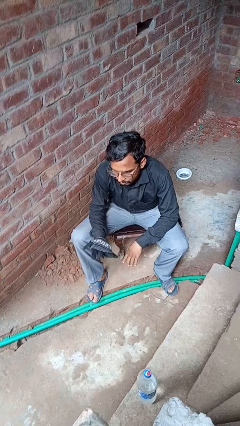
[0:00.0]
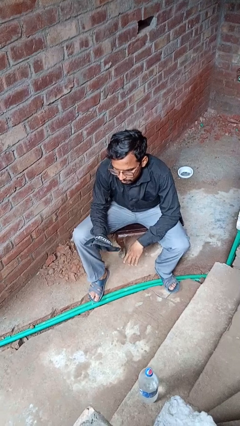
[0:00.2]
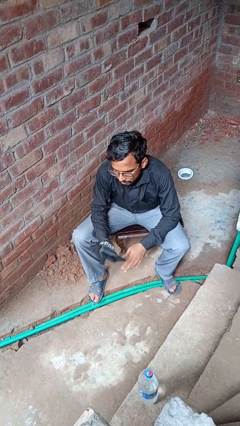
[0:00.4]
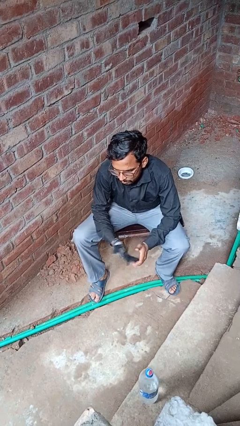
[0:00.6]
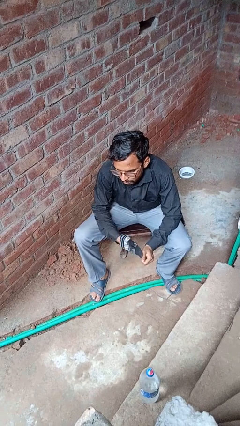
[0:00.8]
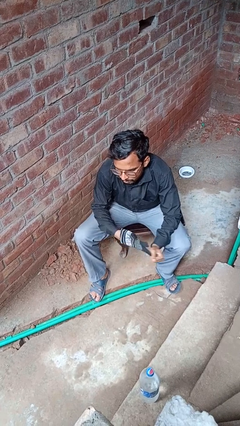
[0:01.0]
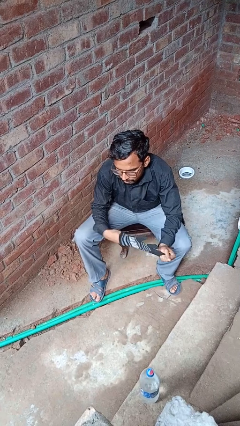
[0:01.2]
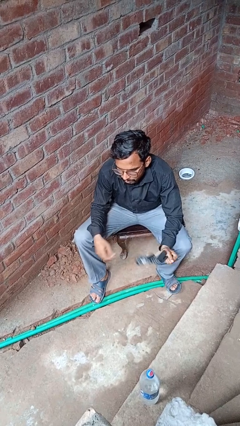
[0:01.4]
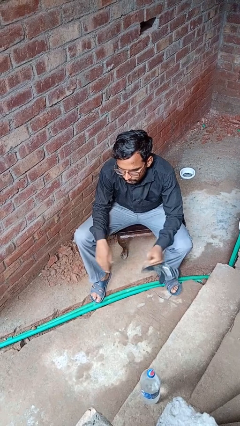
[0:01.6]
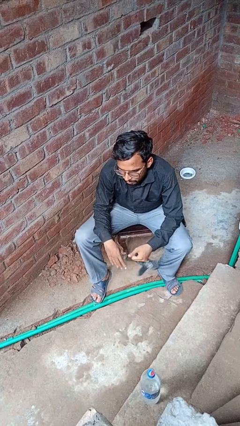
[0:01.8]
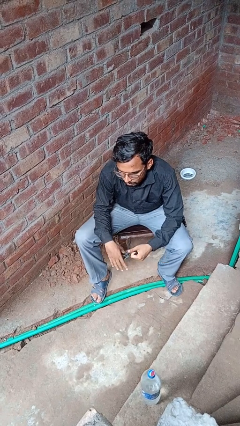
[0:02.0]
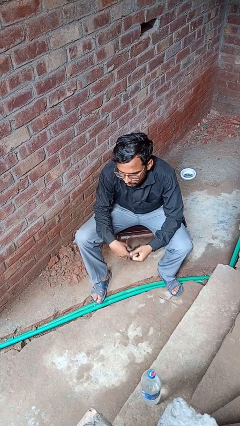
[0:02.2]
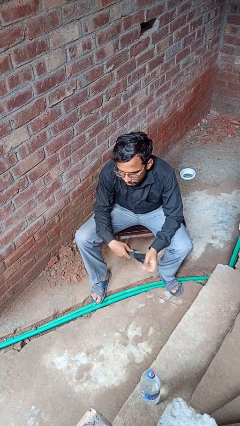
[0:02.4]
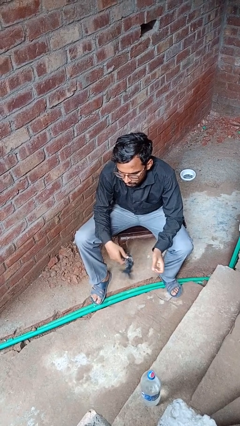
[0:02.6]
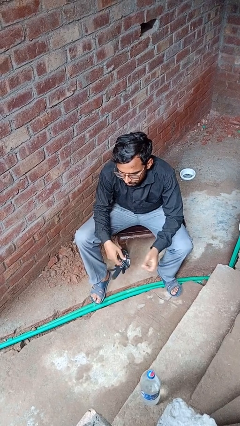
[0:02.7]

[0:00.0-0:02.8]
person takes off gloves

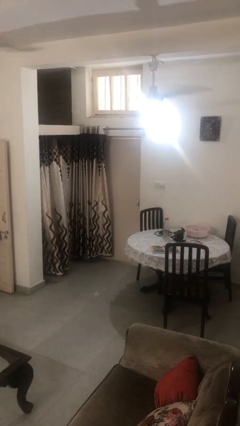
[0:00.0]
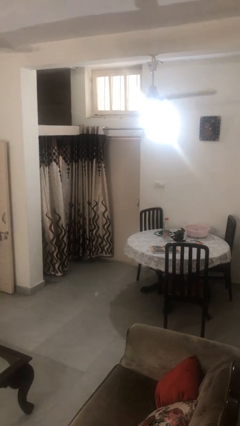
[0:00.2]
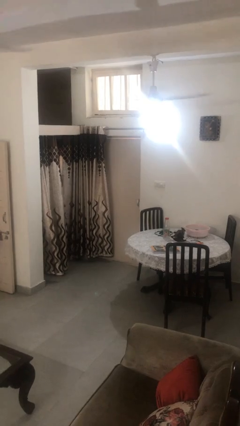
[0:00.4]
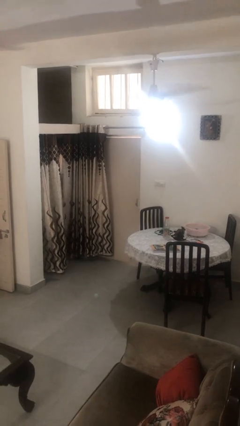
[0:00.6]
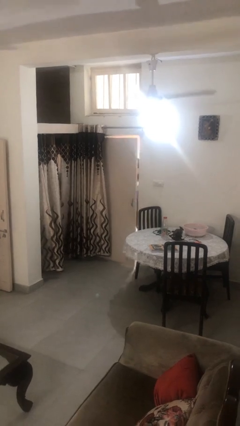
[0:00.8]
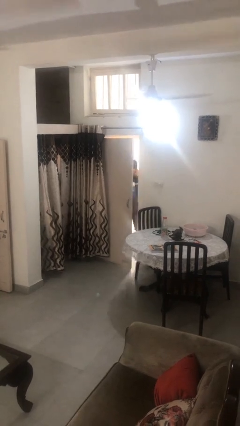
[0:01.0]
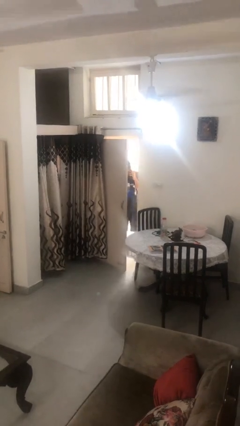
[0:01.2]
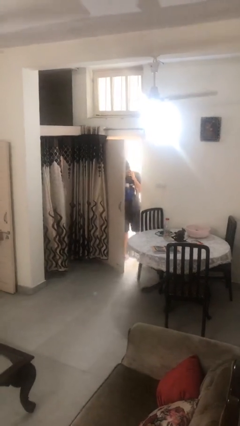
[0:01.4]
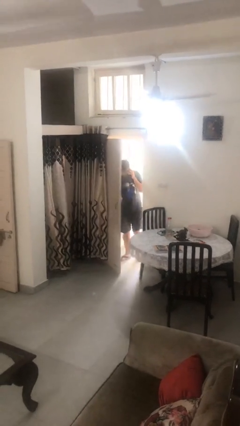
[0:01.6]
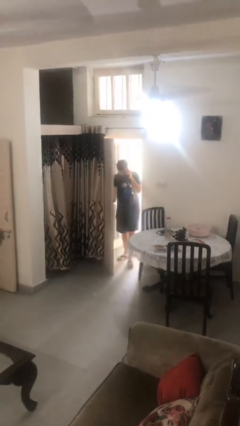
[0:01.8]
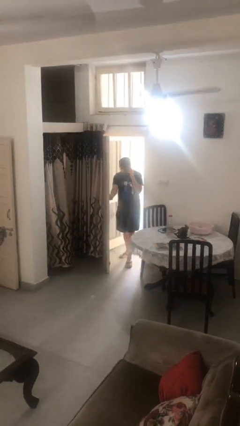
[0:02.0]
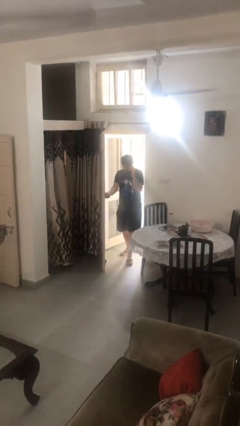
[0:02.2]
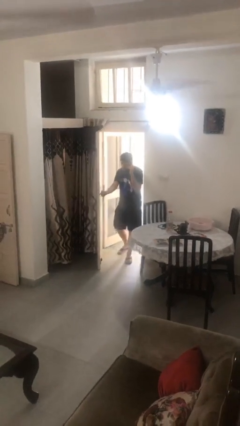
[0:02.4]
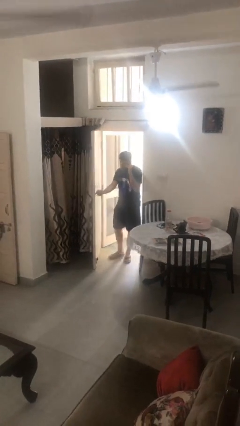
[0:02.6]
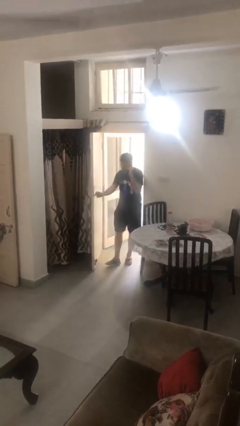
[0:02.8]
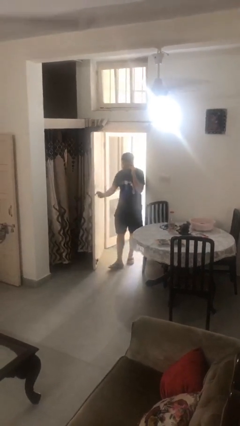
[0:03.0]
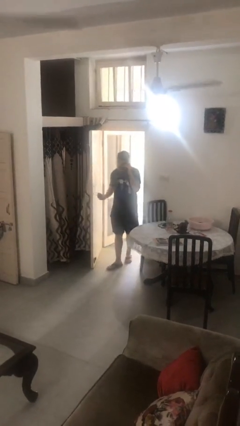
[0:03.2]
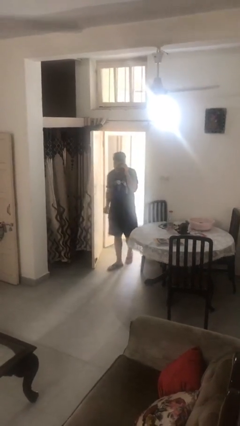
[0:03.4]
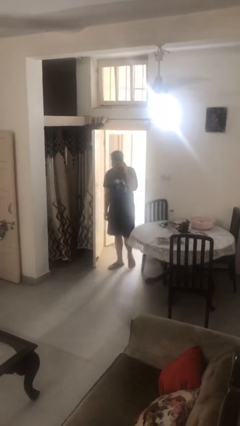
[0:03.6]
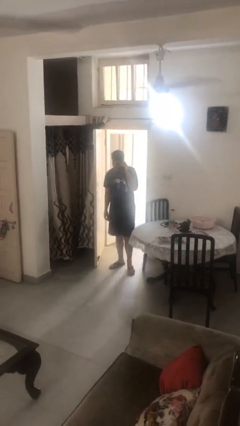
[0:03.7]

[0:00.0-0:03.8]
person opens facility door

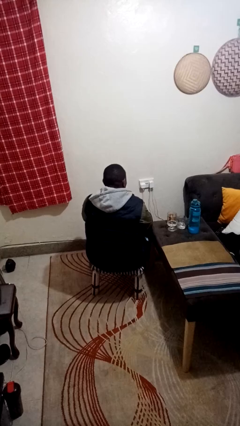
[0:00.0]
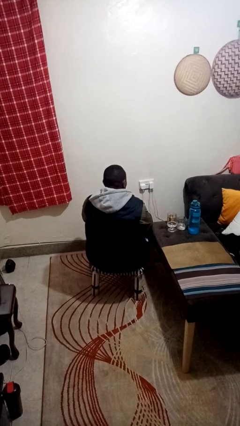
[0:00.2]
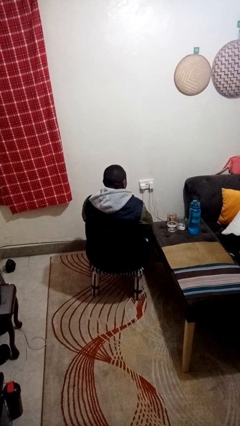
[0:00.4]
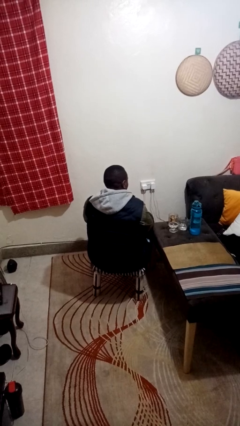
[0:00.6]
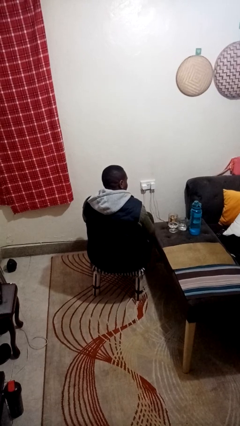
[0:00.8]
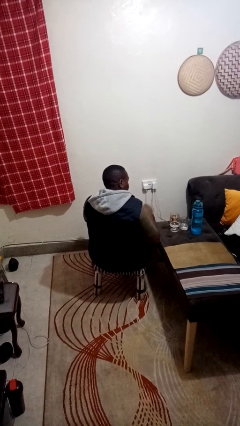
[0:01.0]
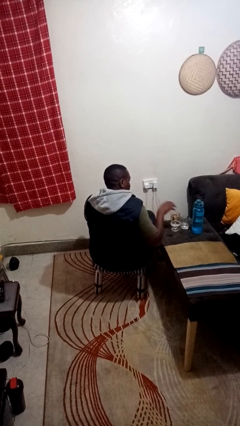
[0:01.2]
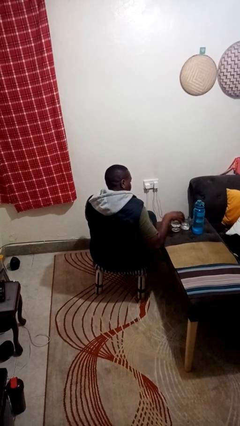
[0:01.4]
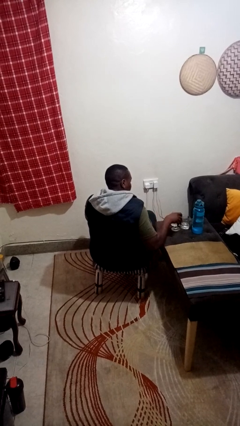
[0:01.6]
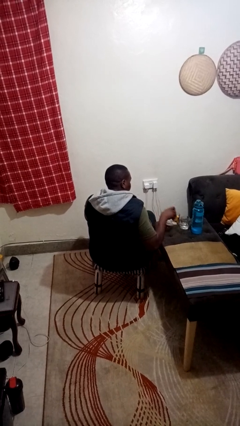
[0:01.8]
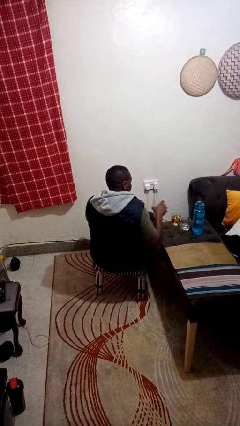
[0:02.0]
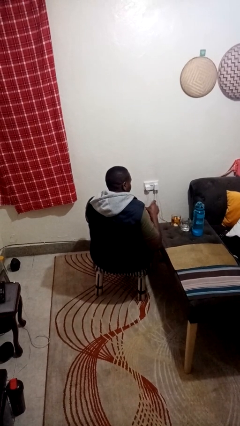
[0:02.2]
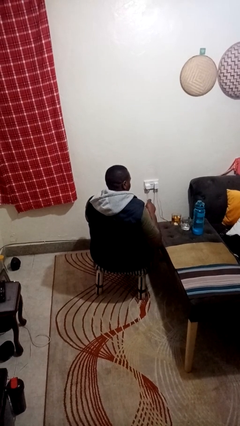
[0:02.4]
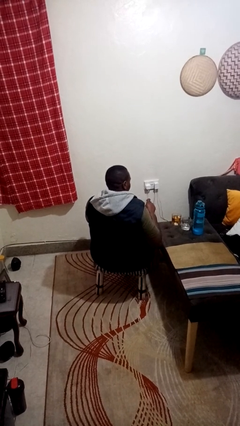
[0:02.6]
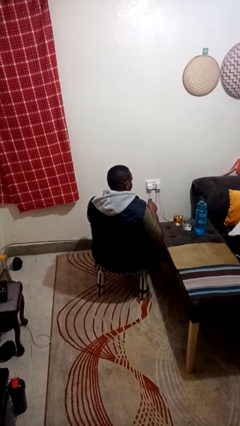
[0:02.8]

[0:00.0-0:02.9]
person picks up object from table

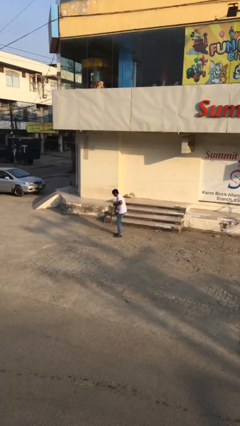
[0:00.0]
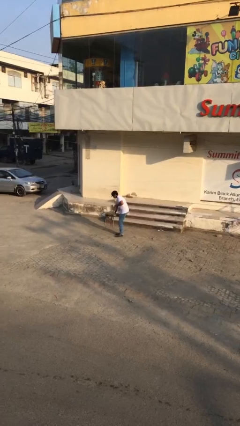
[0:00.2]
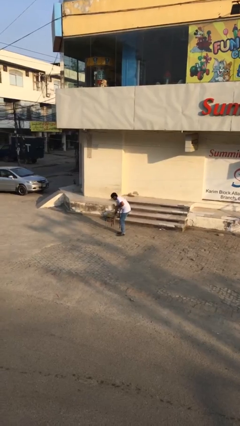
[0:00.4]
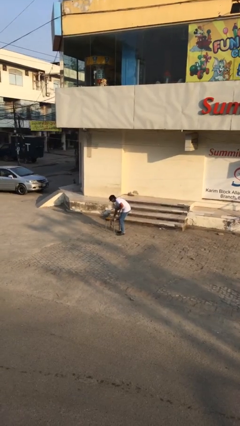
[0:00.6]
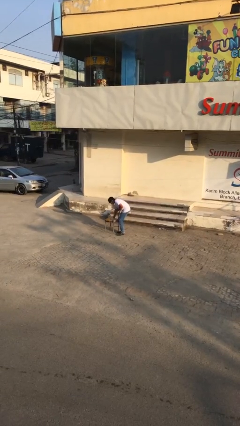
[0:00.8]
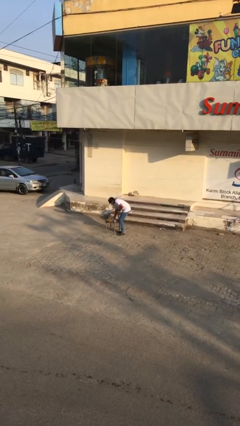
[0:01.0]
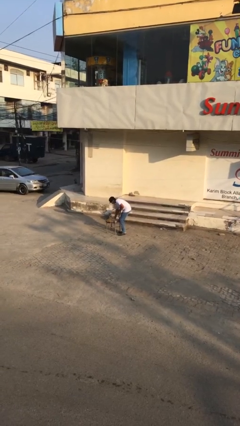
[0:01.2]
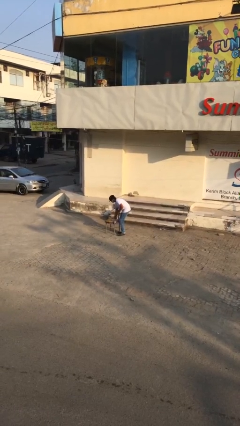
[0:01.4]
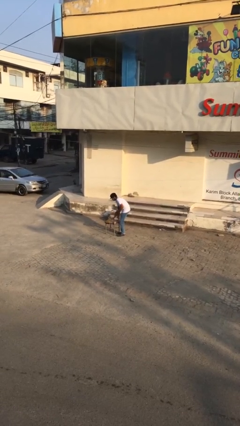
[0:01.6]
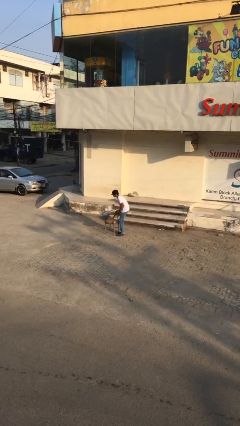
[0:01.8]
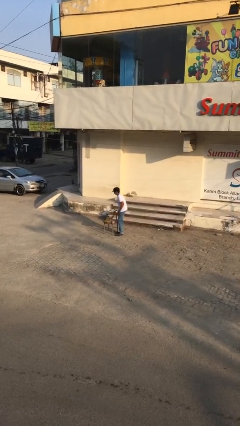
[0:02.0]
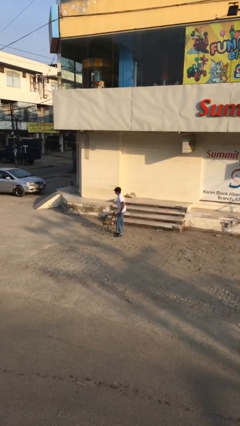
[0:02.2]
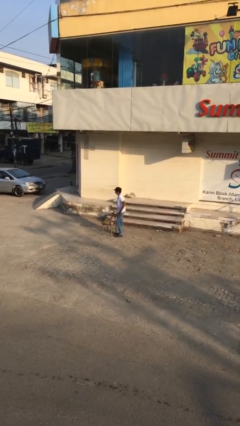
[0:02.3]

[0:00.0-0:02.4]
person puts down object on floor

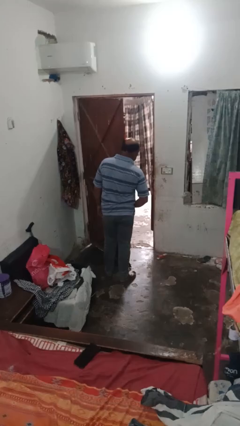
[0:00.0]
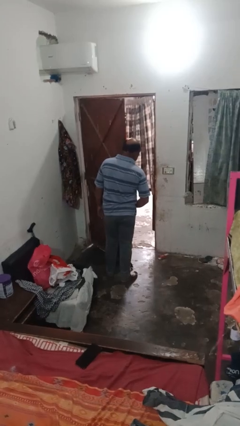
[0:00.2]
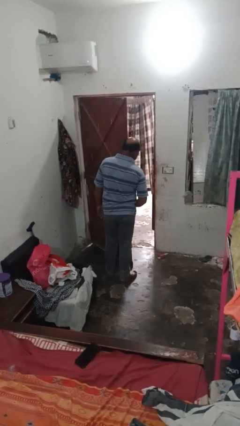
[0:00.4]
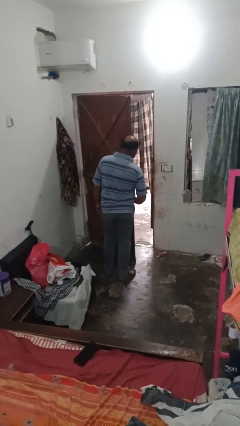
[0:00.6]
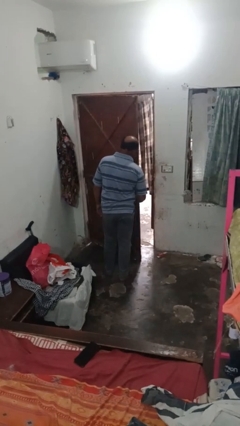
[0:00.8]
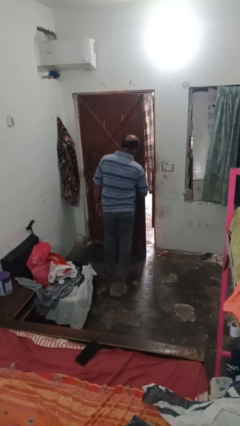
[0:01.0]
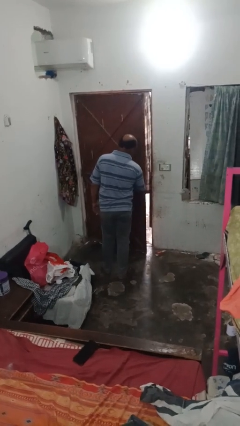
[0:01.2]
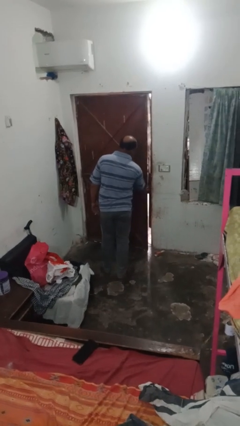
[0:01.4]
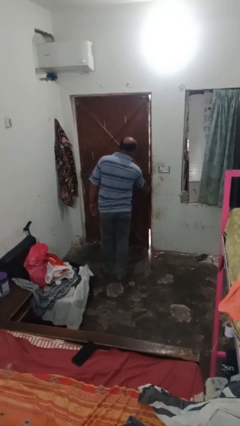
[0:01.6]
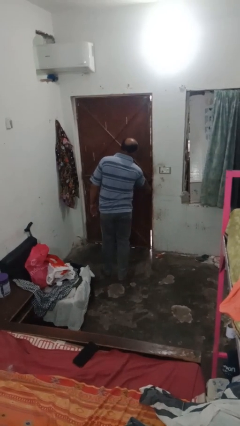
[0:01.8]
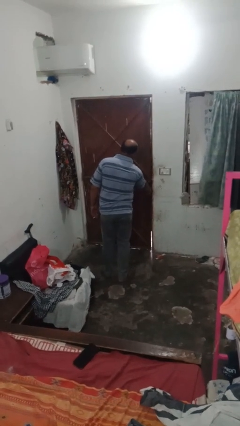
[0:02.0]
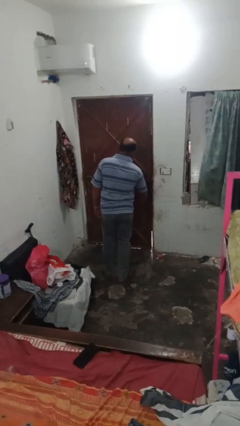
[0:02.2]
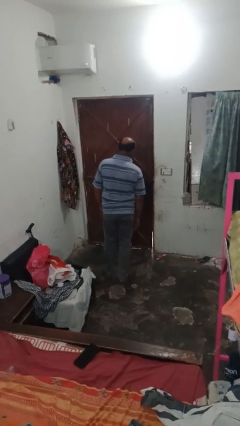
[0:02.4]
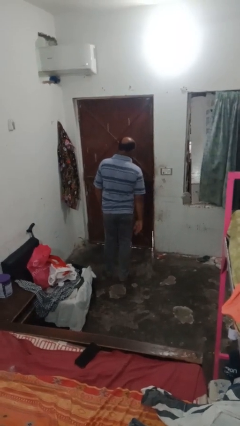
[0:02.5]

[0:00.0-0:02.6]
person closes closet door

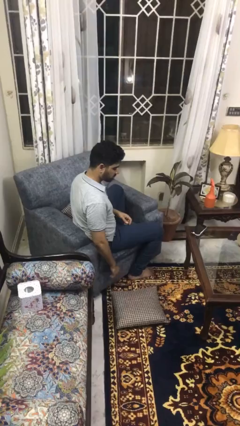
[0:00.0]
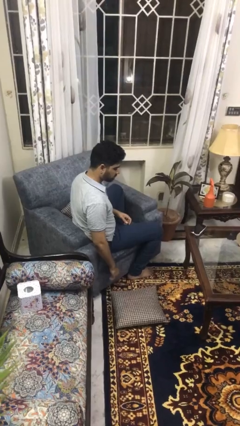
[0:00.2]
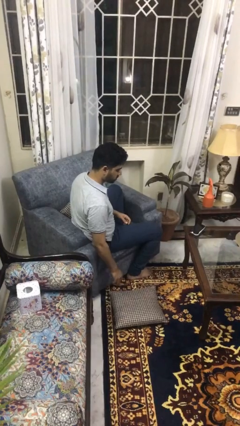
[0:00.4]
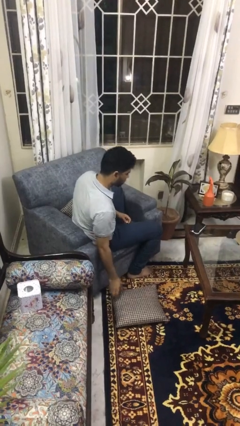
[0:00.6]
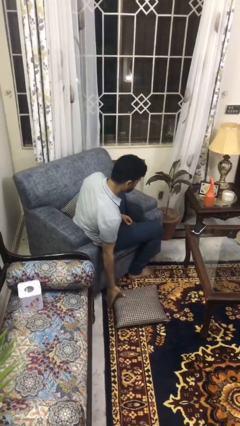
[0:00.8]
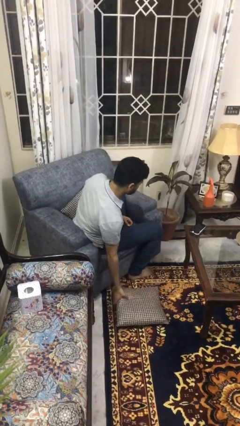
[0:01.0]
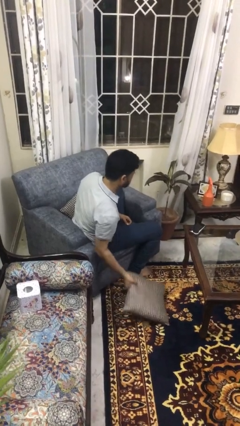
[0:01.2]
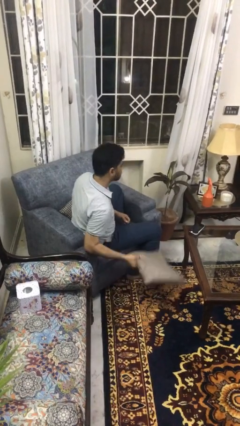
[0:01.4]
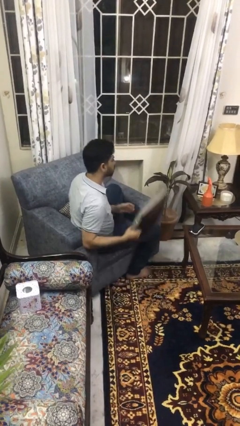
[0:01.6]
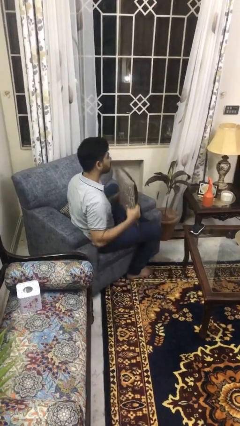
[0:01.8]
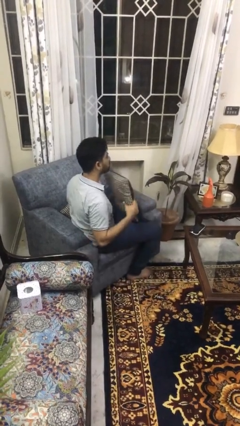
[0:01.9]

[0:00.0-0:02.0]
person picks up object from floor

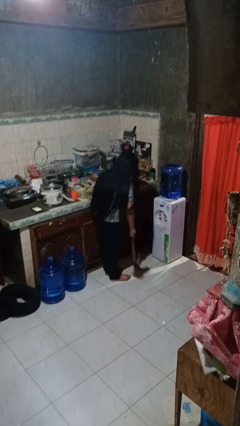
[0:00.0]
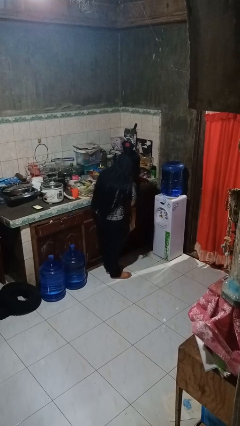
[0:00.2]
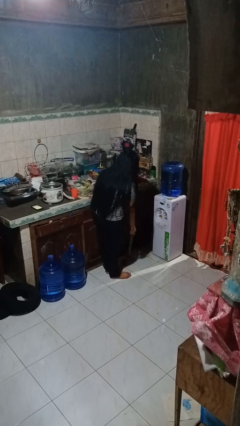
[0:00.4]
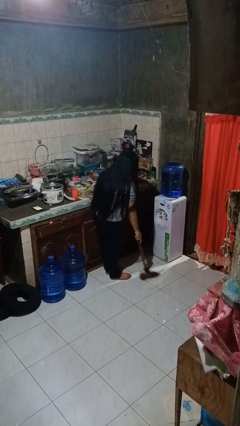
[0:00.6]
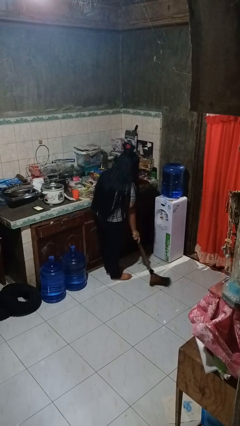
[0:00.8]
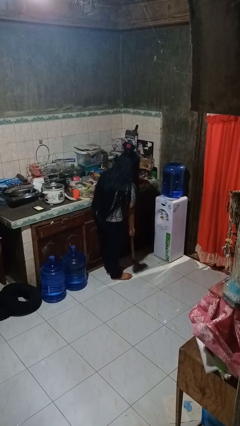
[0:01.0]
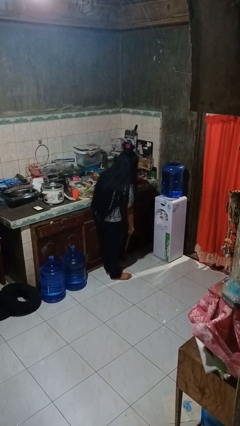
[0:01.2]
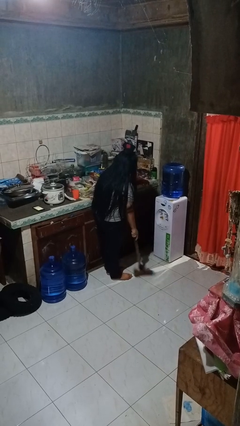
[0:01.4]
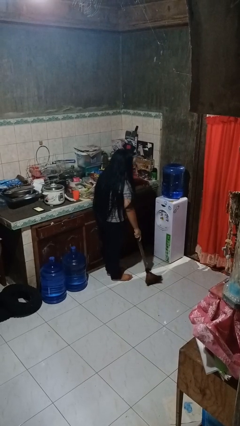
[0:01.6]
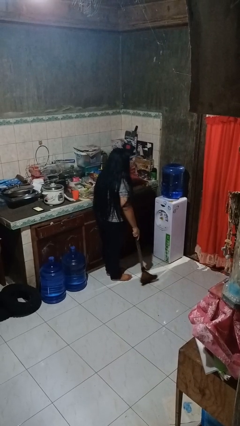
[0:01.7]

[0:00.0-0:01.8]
person sweeps floor
